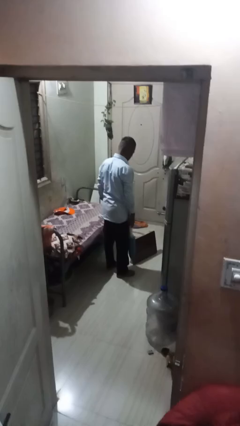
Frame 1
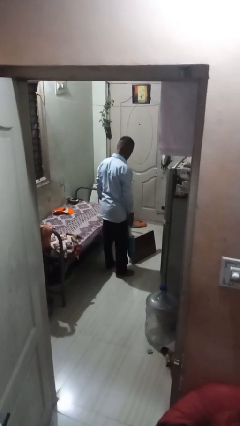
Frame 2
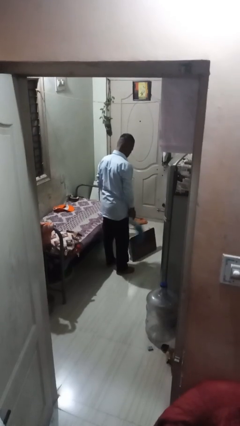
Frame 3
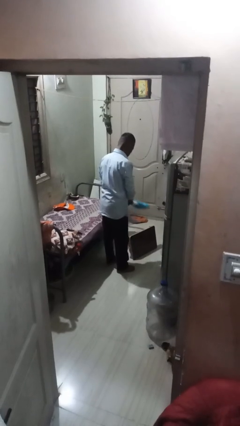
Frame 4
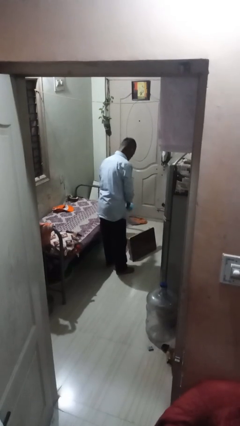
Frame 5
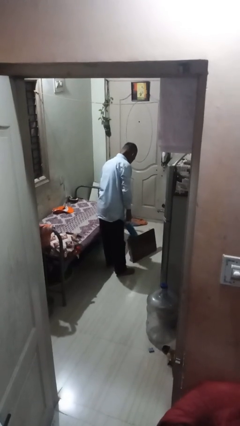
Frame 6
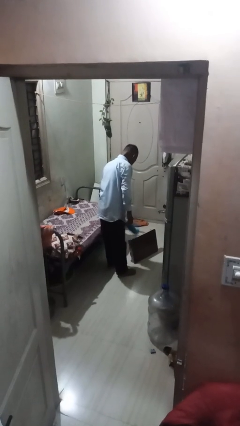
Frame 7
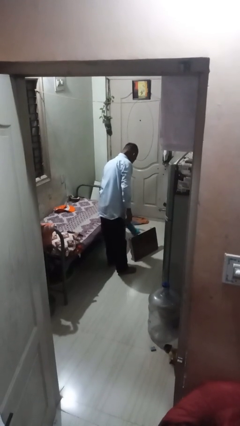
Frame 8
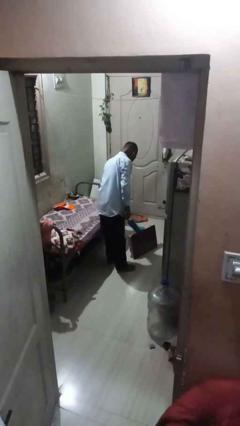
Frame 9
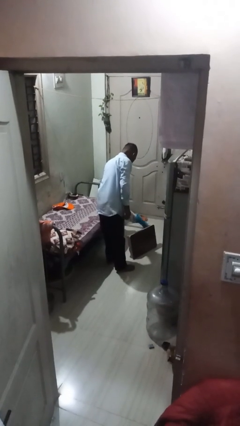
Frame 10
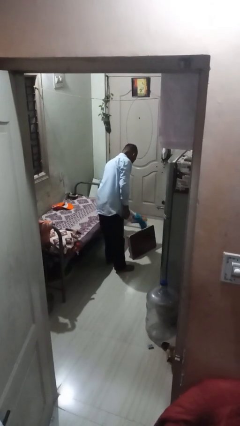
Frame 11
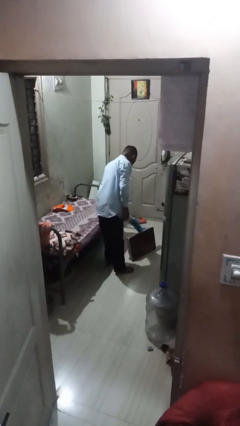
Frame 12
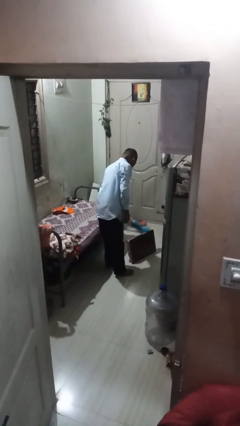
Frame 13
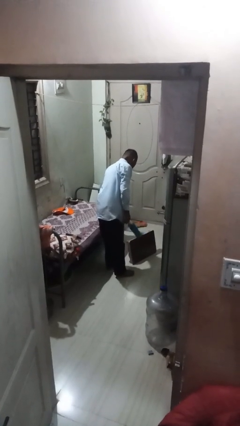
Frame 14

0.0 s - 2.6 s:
person dusts furniture

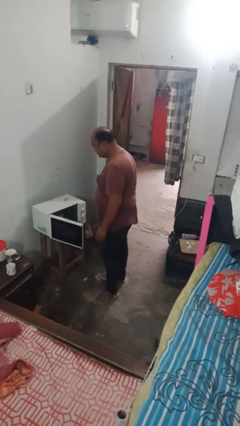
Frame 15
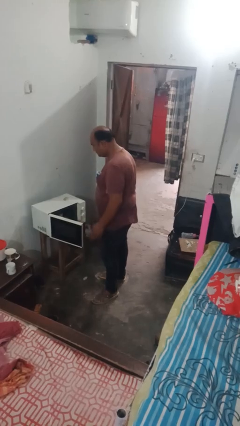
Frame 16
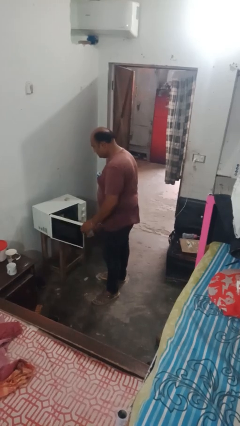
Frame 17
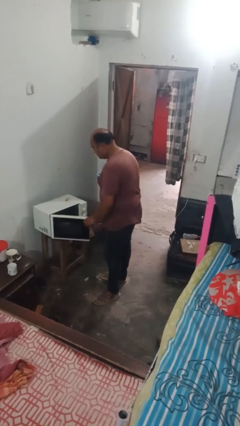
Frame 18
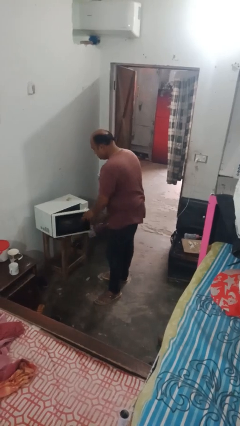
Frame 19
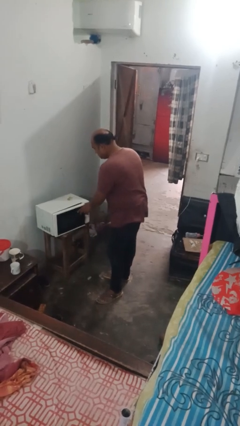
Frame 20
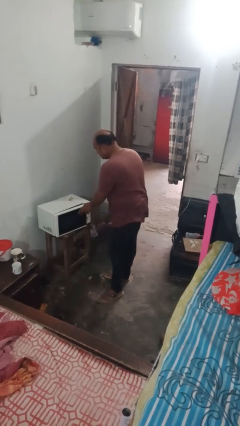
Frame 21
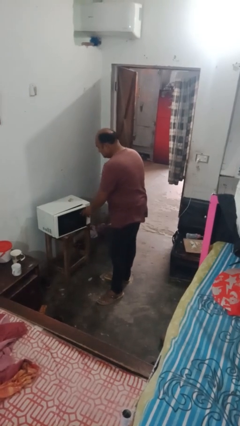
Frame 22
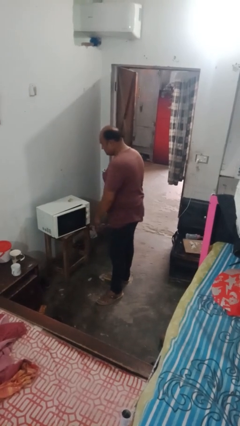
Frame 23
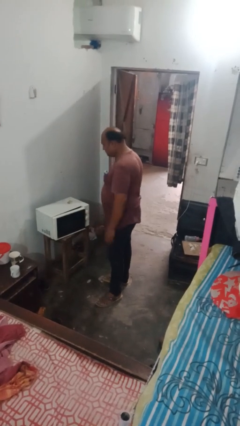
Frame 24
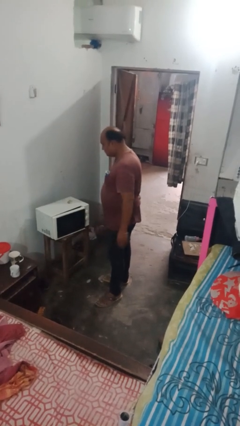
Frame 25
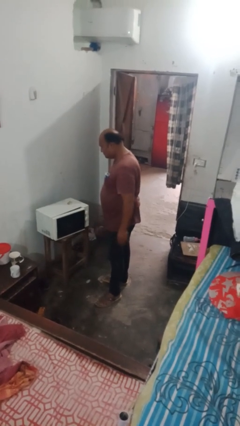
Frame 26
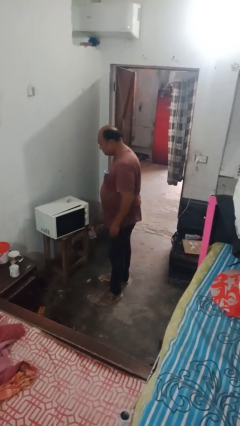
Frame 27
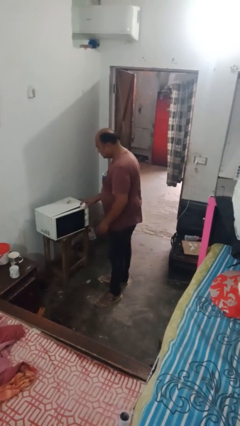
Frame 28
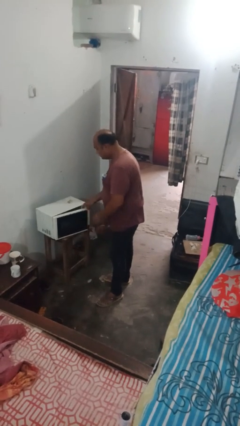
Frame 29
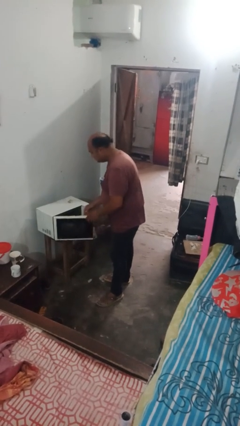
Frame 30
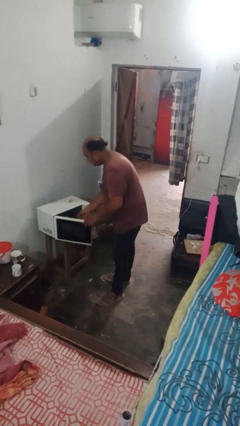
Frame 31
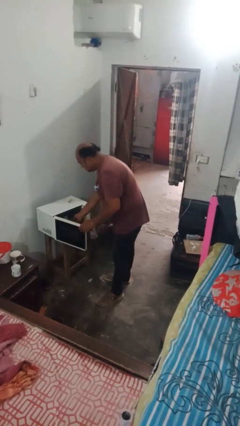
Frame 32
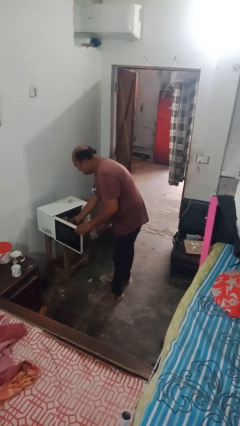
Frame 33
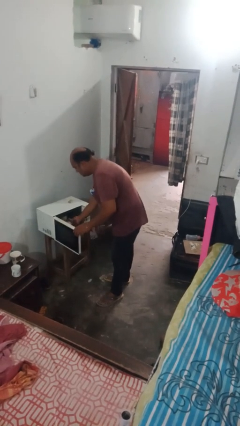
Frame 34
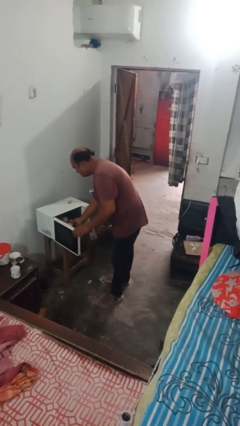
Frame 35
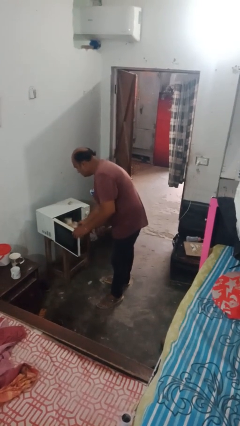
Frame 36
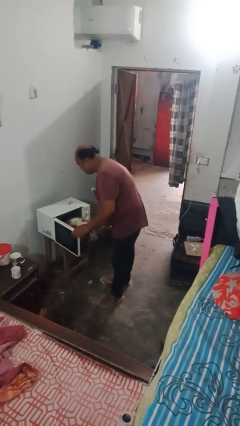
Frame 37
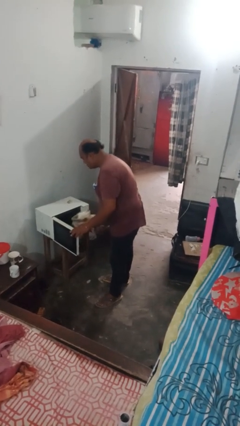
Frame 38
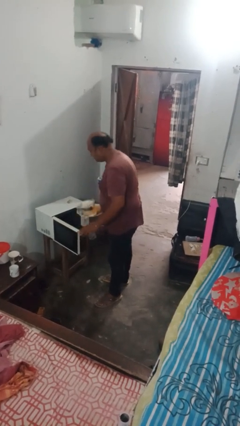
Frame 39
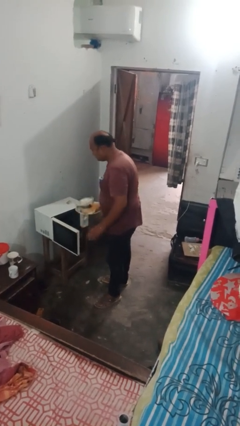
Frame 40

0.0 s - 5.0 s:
person takes object from microwave

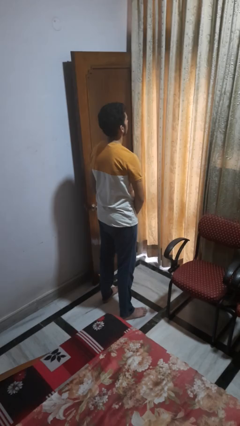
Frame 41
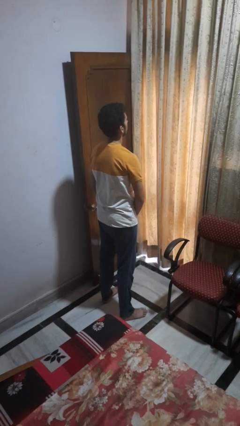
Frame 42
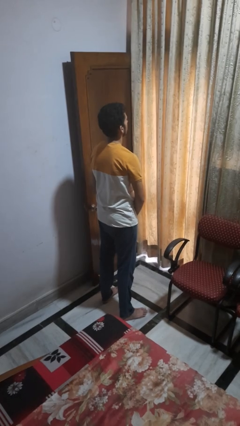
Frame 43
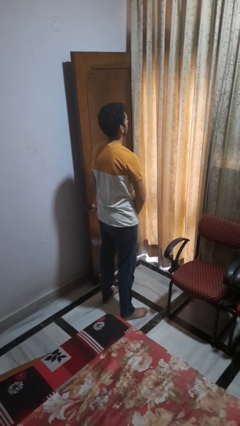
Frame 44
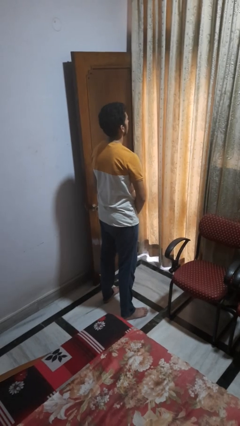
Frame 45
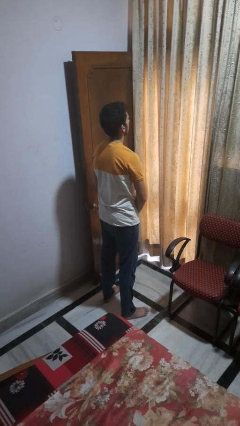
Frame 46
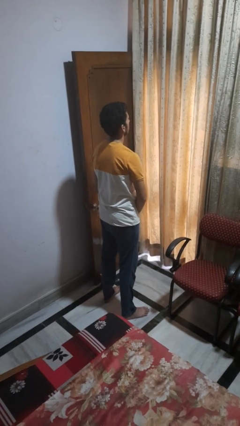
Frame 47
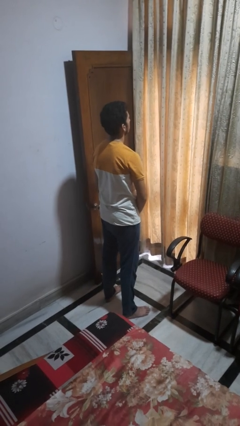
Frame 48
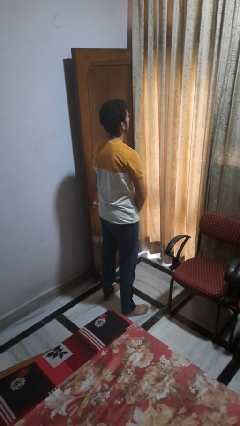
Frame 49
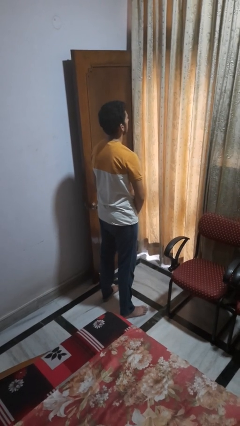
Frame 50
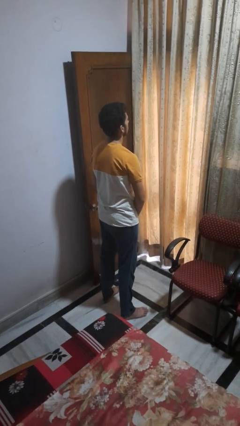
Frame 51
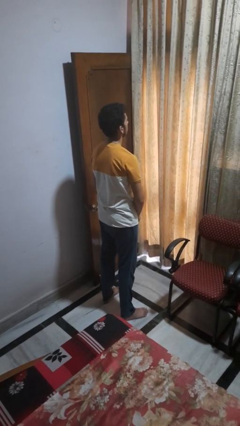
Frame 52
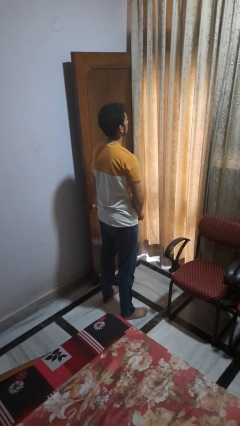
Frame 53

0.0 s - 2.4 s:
person takes off glasses

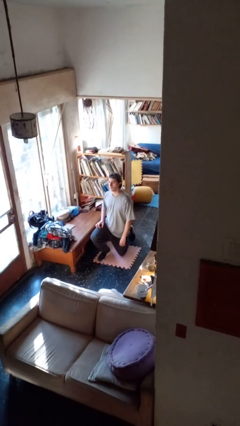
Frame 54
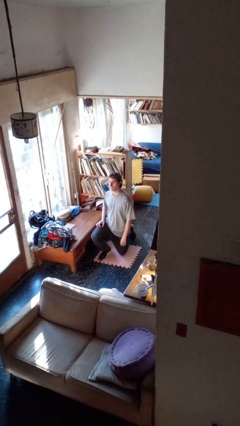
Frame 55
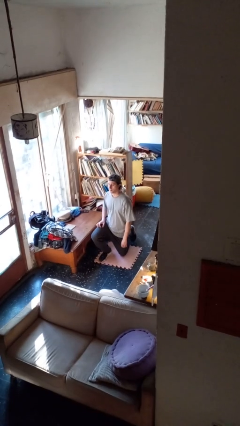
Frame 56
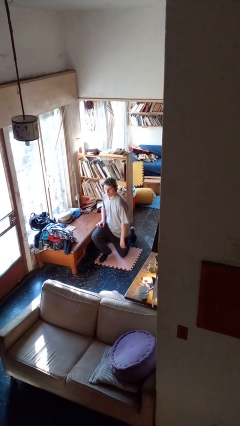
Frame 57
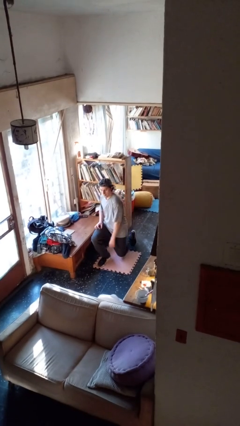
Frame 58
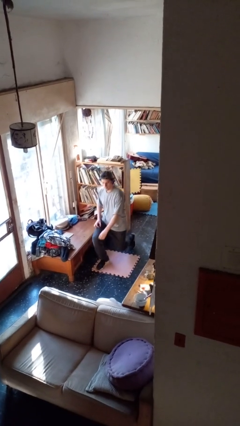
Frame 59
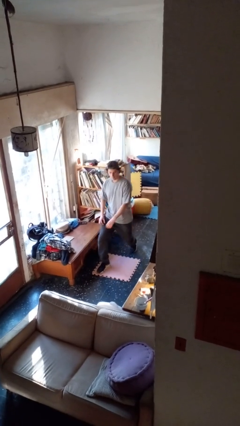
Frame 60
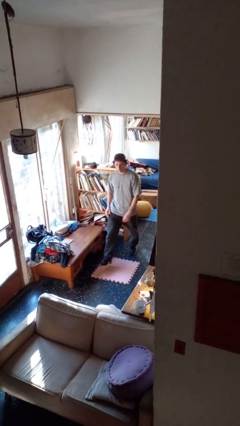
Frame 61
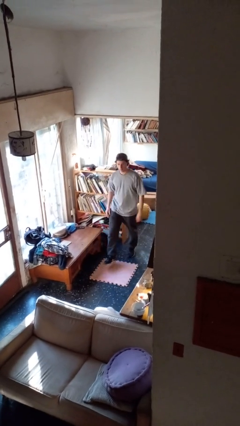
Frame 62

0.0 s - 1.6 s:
person stands up from floor

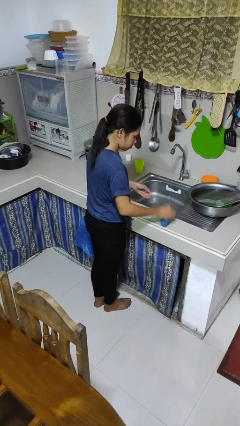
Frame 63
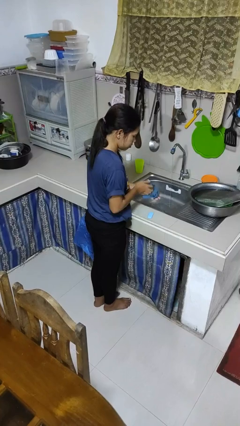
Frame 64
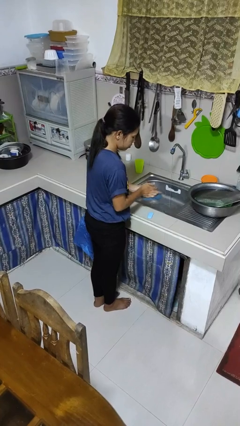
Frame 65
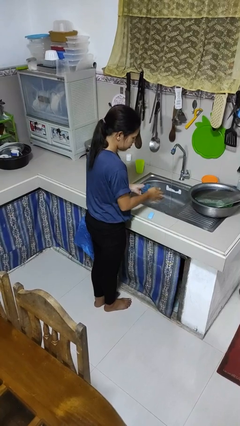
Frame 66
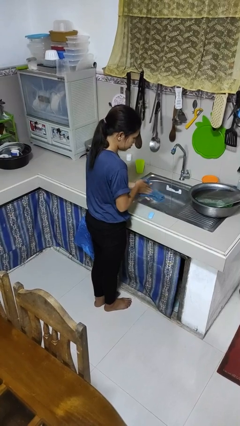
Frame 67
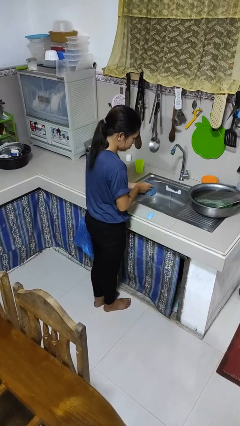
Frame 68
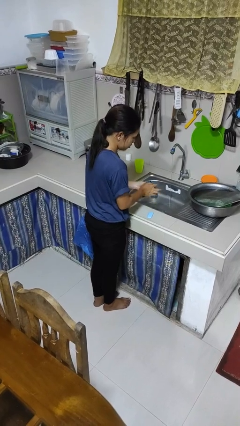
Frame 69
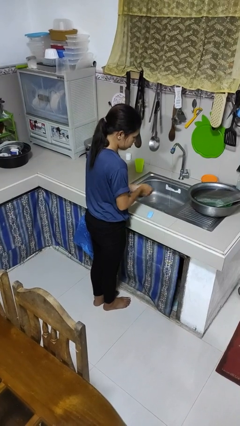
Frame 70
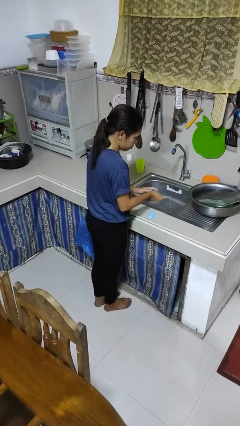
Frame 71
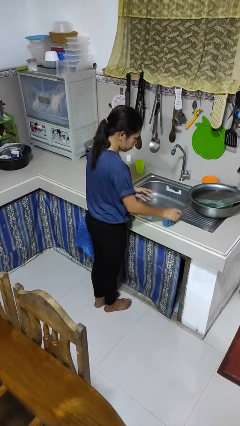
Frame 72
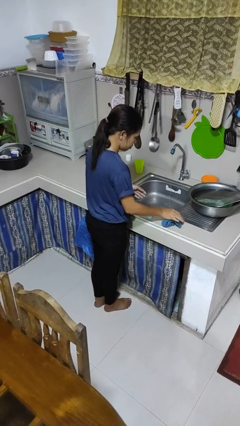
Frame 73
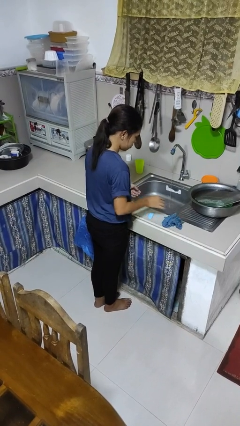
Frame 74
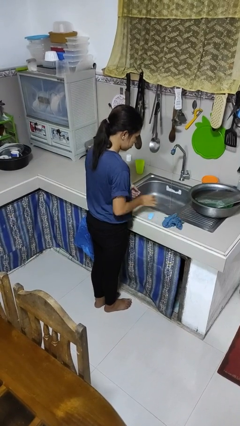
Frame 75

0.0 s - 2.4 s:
person dries hands with towel

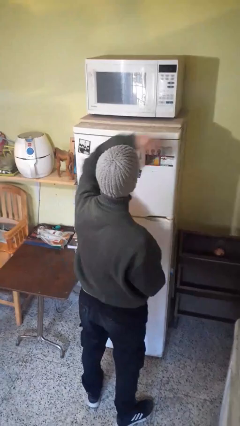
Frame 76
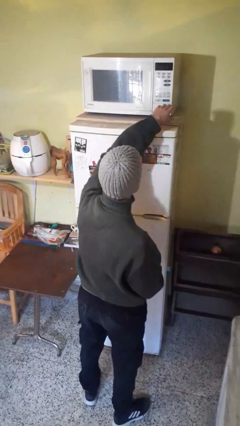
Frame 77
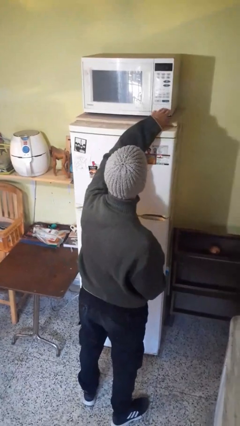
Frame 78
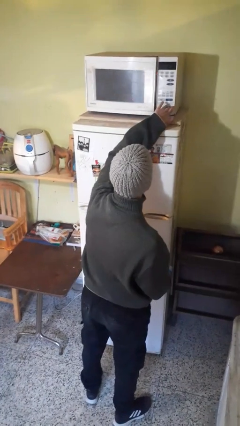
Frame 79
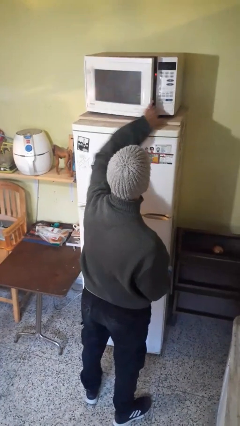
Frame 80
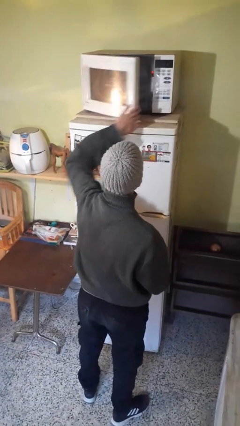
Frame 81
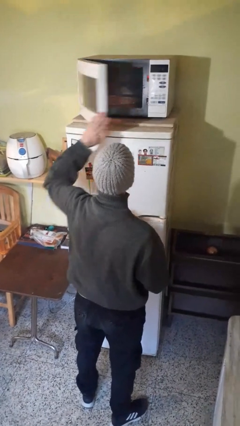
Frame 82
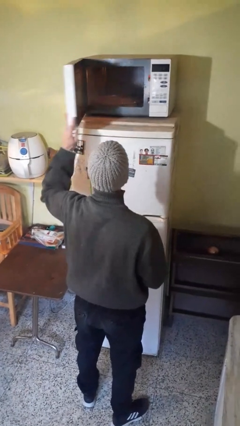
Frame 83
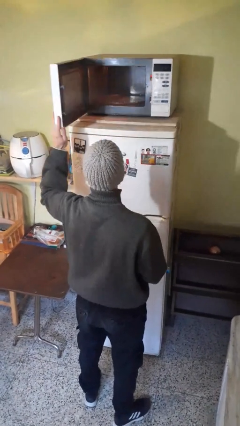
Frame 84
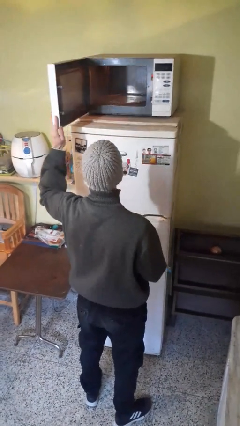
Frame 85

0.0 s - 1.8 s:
person opens microwave

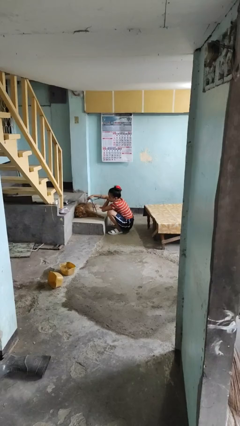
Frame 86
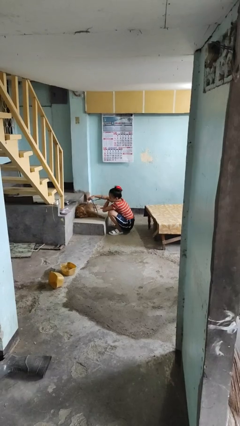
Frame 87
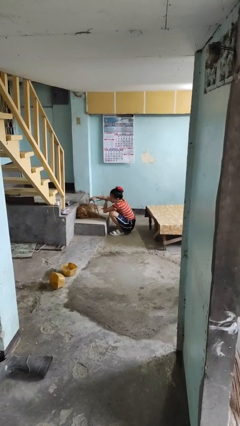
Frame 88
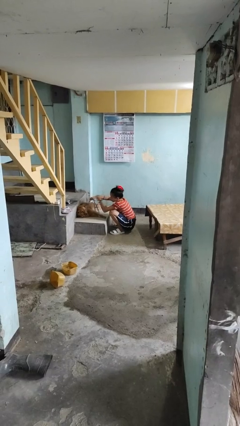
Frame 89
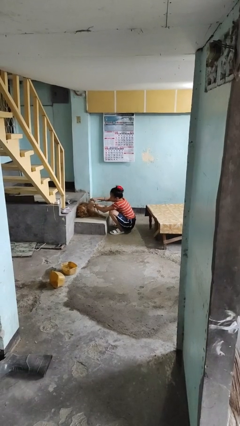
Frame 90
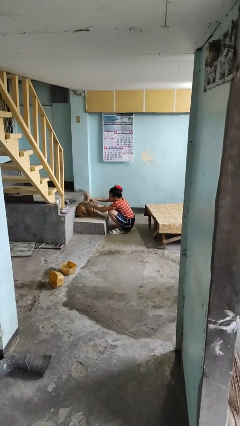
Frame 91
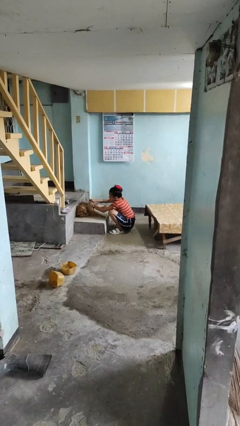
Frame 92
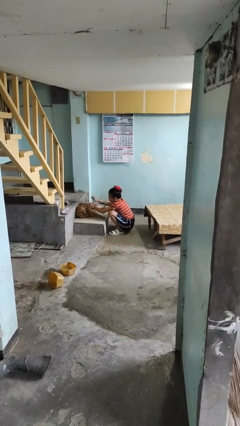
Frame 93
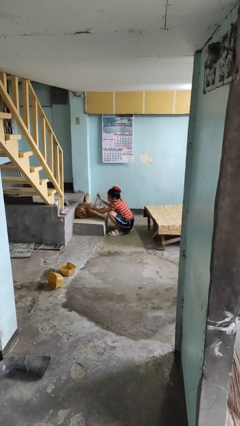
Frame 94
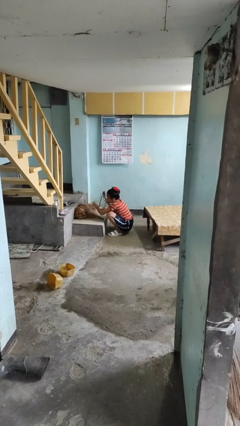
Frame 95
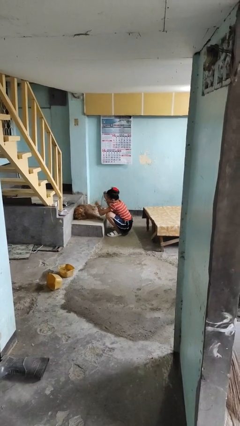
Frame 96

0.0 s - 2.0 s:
person unattaches leash from dog
